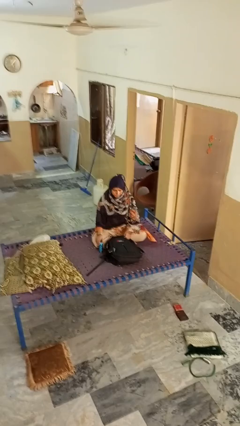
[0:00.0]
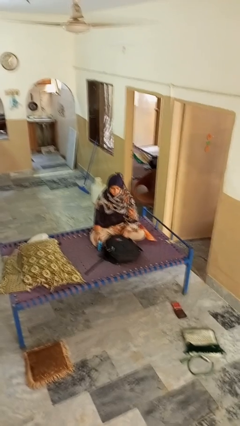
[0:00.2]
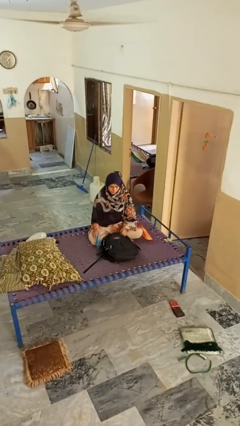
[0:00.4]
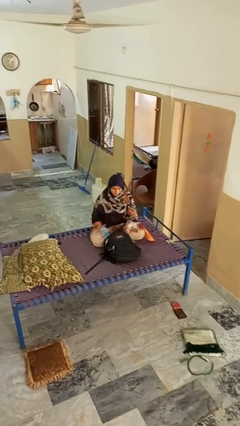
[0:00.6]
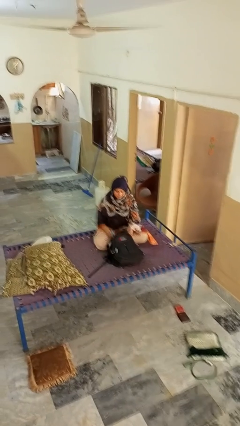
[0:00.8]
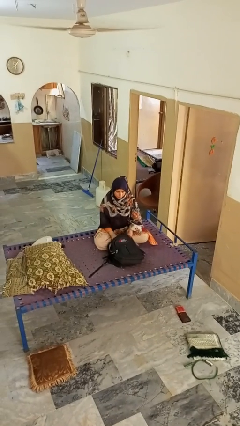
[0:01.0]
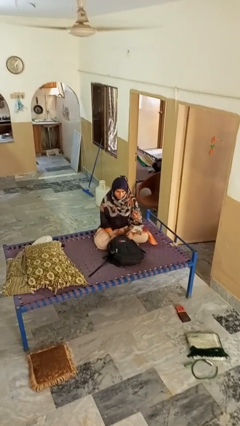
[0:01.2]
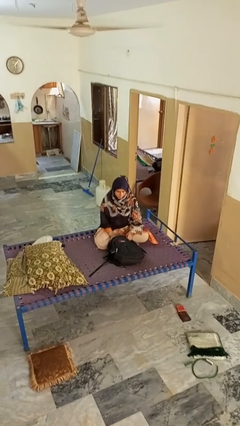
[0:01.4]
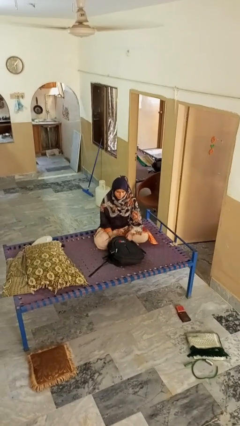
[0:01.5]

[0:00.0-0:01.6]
person puts object into bag

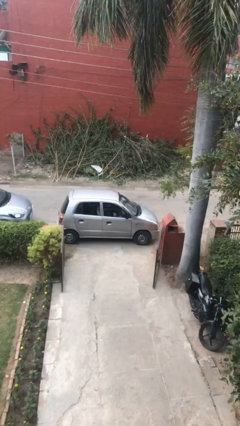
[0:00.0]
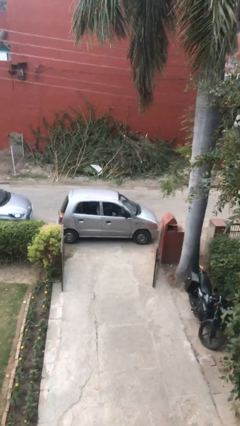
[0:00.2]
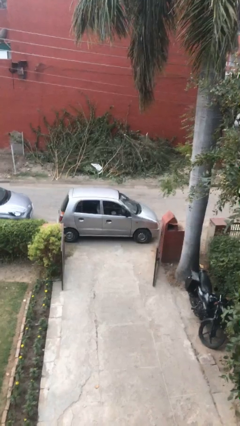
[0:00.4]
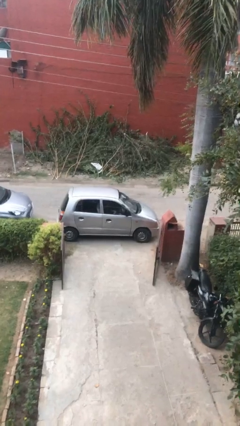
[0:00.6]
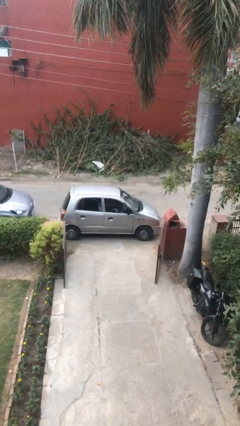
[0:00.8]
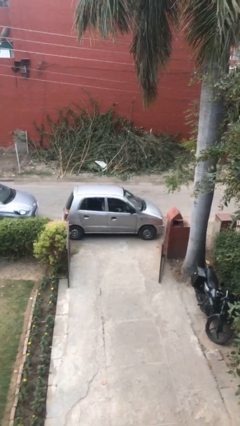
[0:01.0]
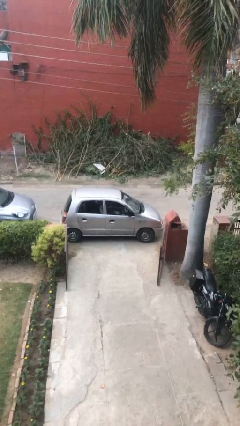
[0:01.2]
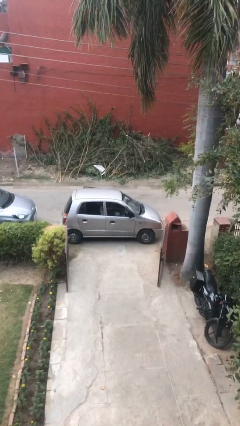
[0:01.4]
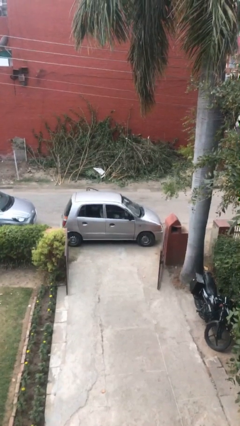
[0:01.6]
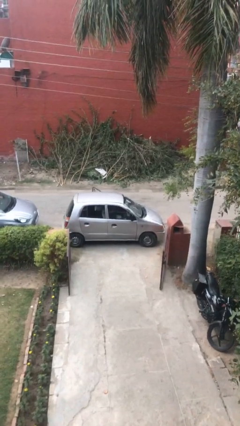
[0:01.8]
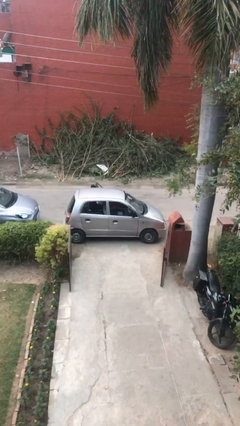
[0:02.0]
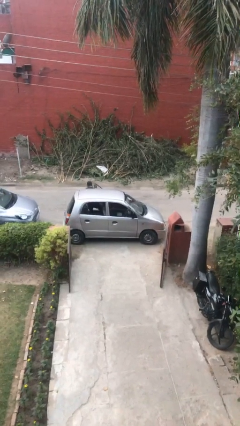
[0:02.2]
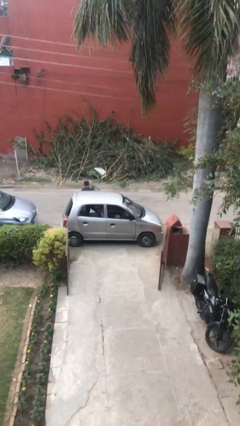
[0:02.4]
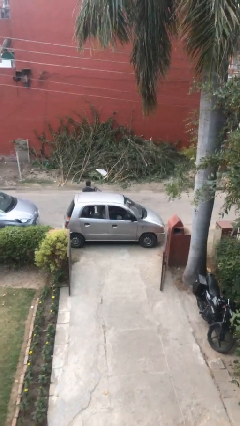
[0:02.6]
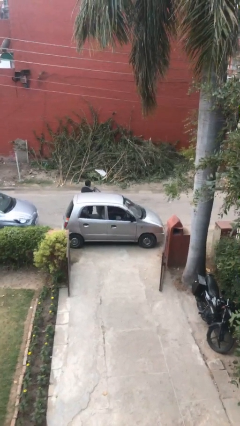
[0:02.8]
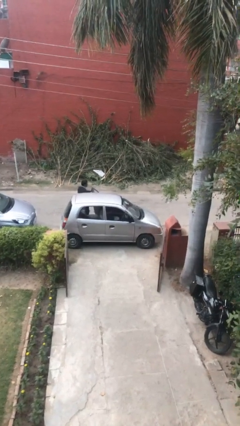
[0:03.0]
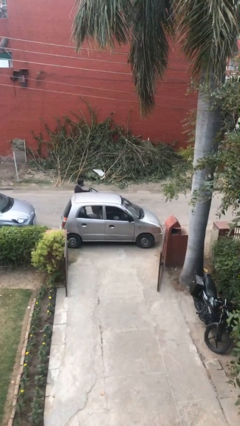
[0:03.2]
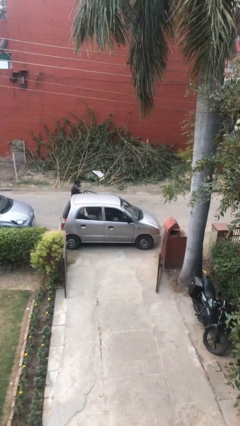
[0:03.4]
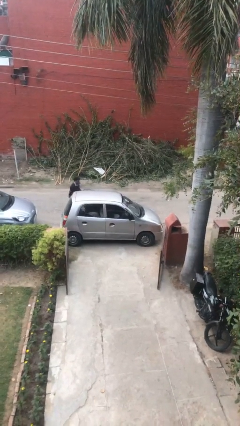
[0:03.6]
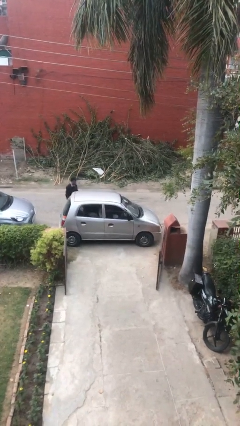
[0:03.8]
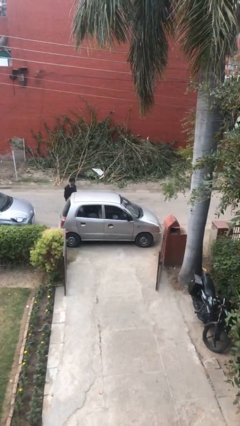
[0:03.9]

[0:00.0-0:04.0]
car drops off person

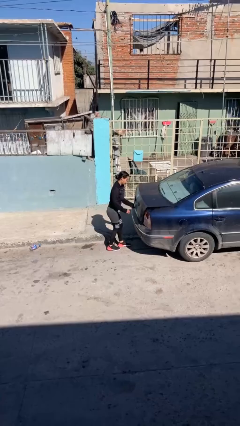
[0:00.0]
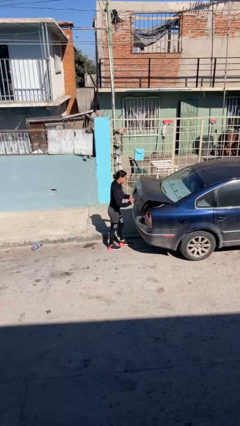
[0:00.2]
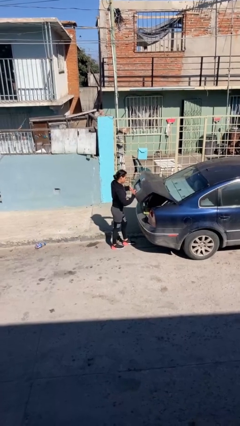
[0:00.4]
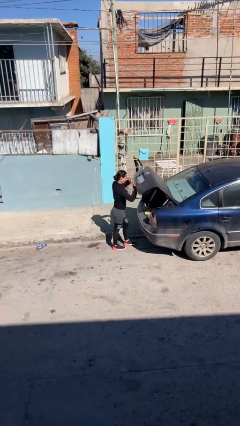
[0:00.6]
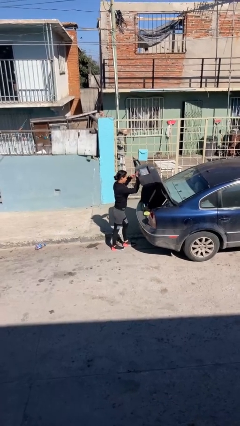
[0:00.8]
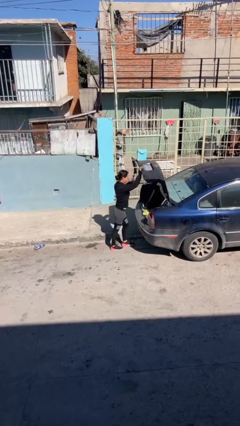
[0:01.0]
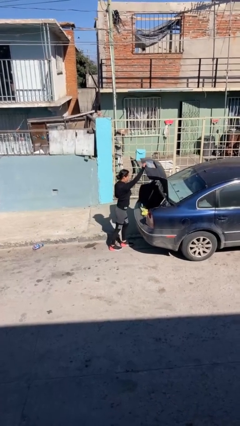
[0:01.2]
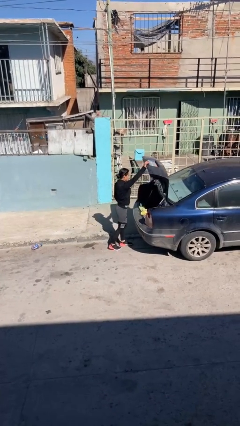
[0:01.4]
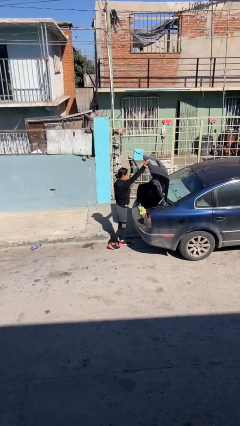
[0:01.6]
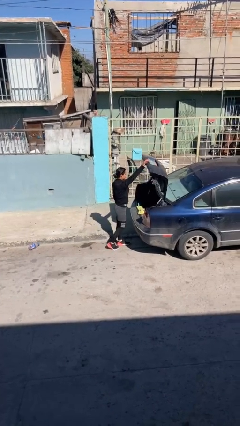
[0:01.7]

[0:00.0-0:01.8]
person opens car trunk

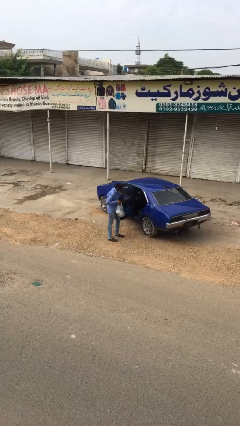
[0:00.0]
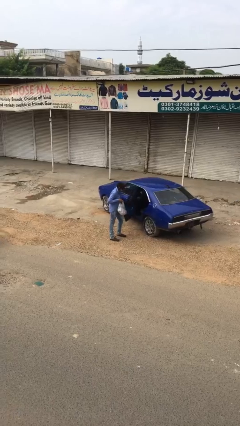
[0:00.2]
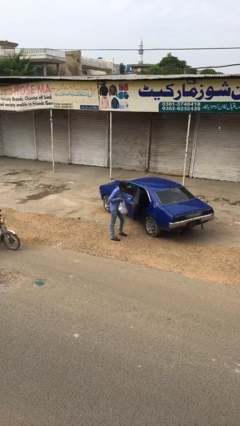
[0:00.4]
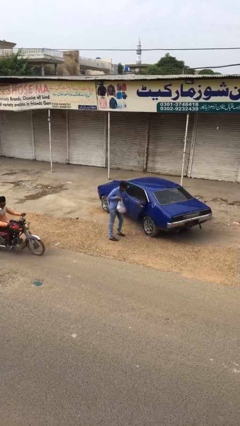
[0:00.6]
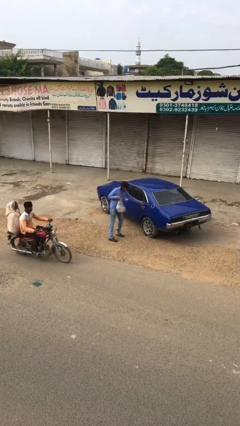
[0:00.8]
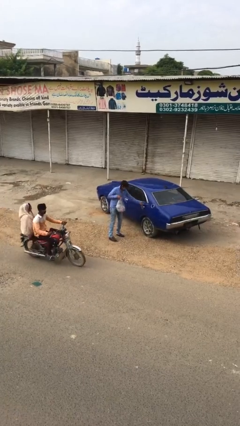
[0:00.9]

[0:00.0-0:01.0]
person closes car door

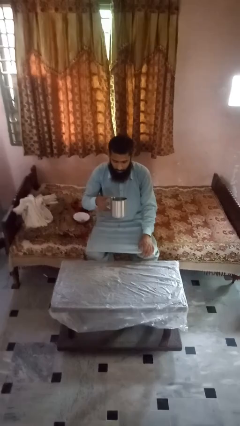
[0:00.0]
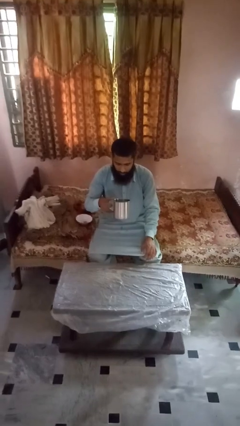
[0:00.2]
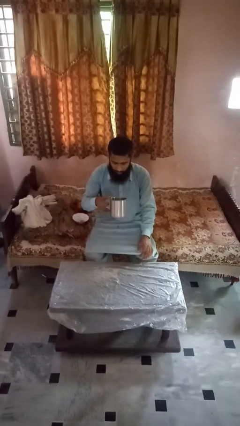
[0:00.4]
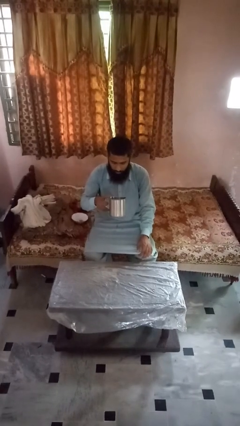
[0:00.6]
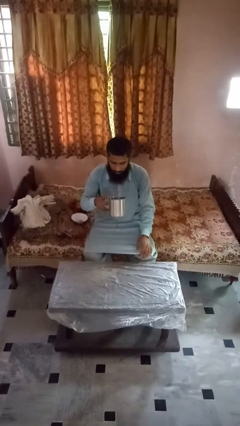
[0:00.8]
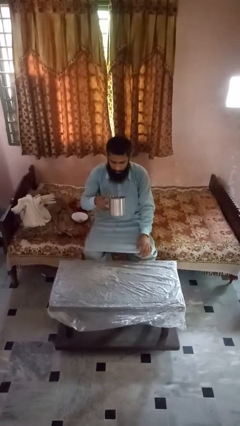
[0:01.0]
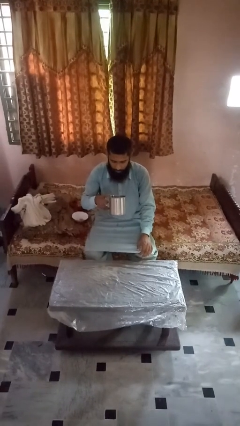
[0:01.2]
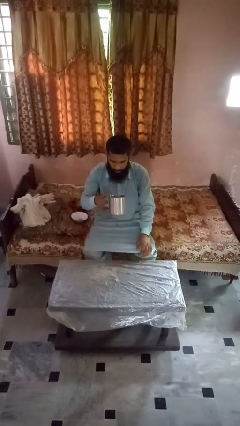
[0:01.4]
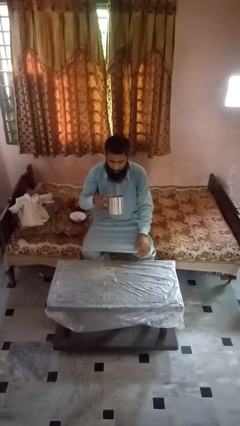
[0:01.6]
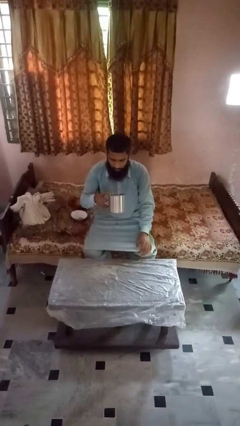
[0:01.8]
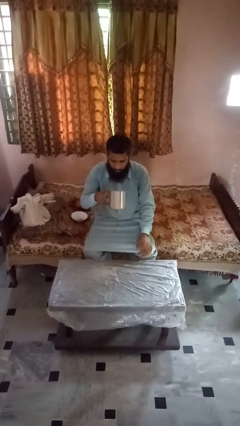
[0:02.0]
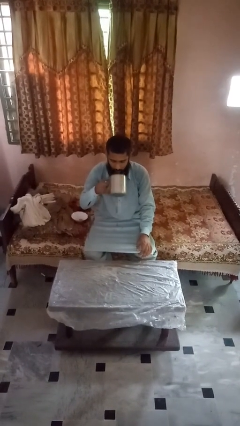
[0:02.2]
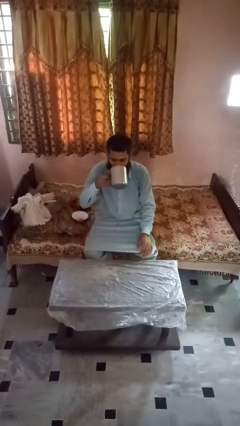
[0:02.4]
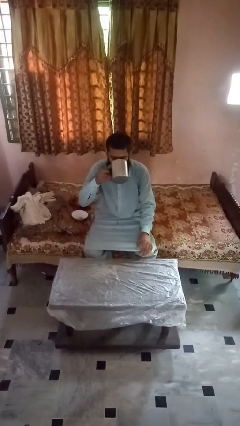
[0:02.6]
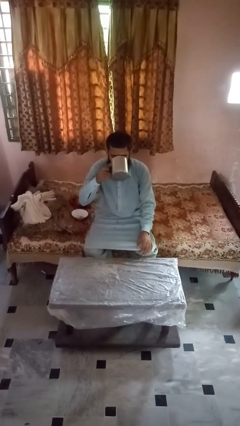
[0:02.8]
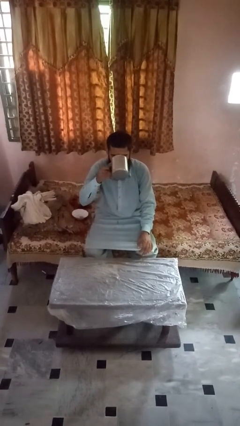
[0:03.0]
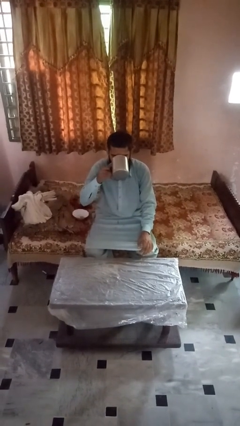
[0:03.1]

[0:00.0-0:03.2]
person drinks from mug

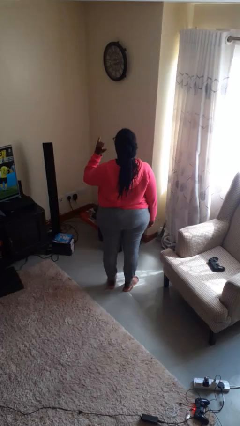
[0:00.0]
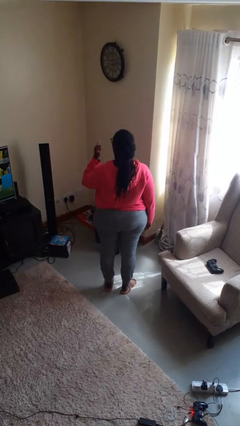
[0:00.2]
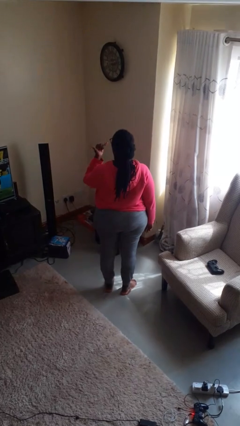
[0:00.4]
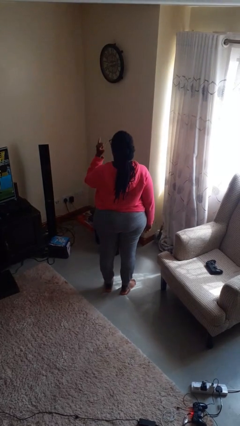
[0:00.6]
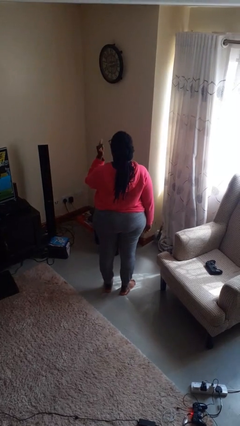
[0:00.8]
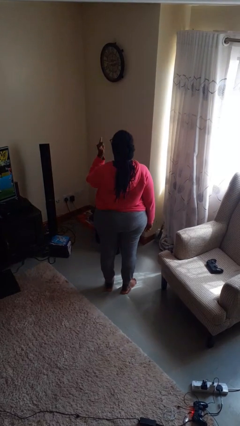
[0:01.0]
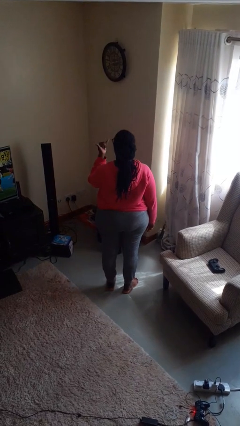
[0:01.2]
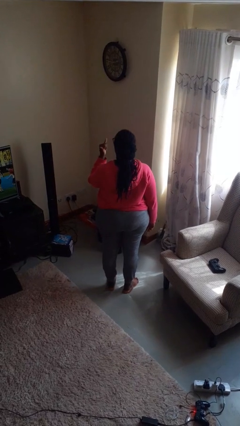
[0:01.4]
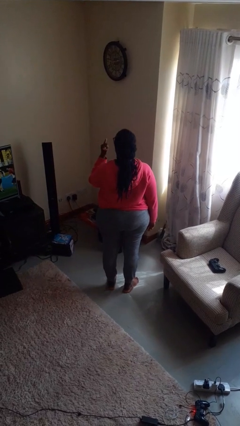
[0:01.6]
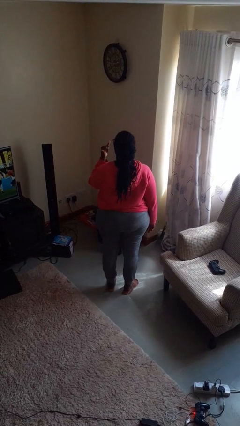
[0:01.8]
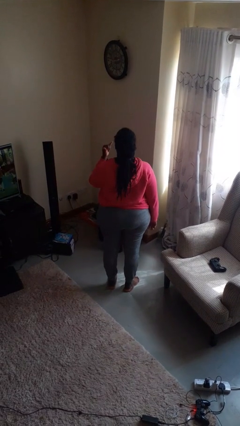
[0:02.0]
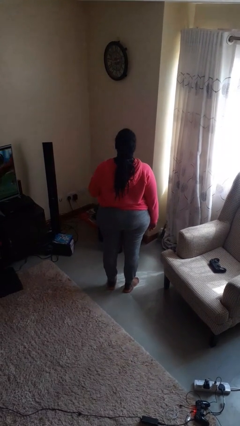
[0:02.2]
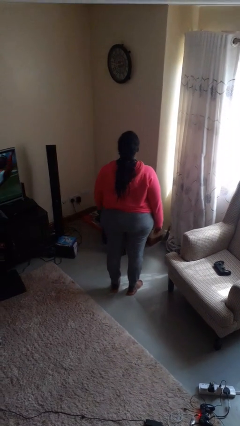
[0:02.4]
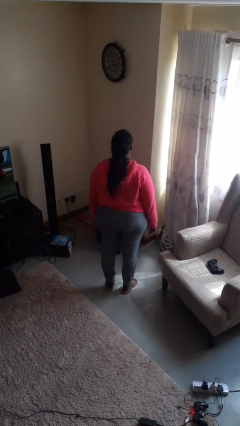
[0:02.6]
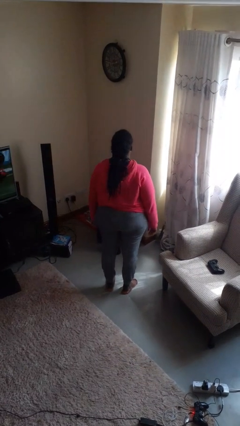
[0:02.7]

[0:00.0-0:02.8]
person gestures hang loose

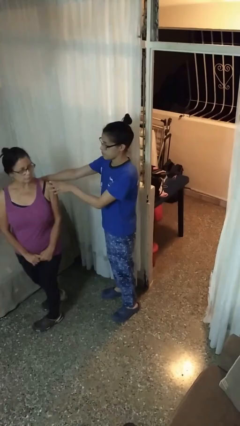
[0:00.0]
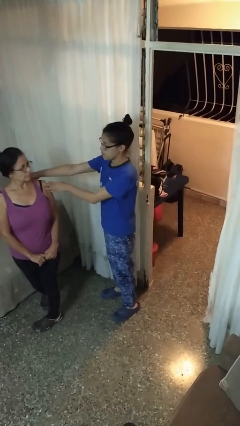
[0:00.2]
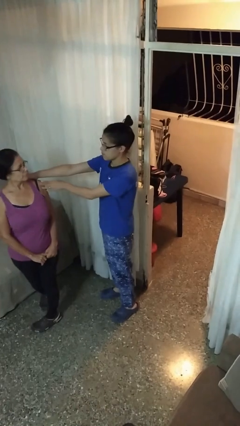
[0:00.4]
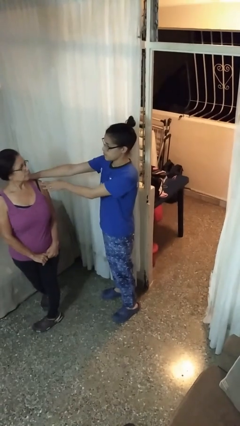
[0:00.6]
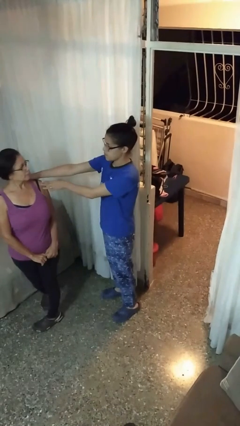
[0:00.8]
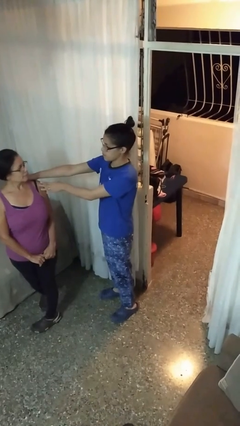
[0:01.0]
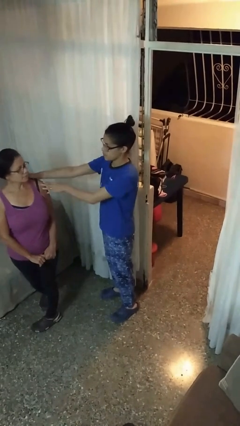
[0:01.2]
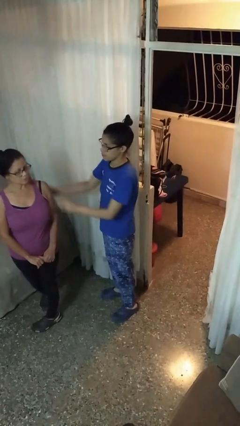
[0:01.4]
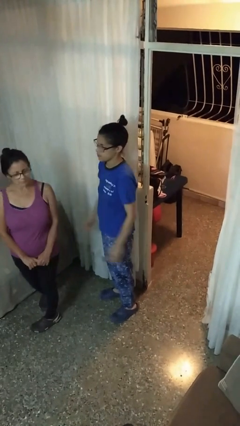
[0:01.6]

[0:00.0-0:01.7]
person spins person around

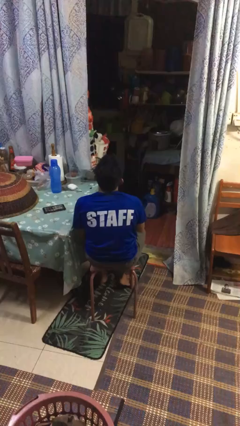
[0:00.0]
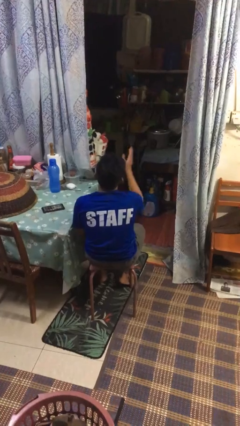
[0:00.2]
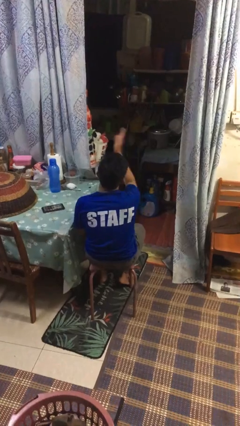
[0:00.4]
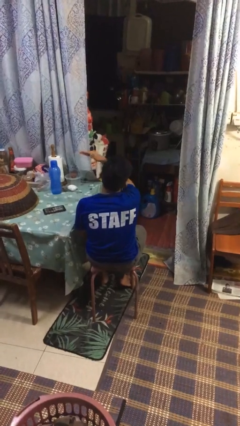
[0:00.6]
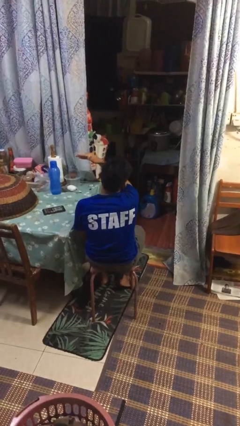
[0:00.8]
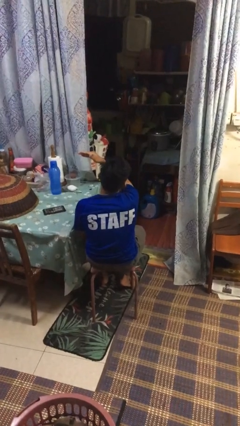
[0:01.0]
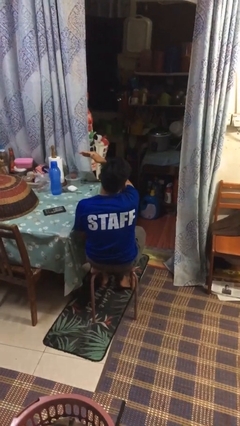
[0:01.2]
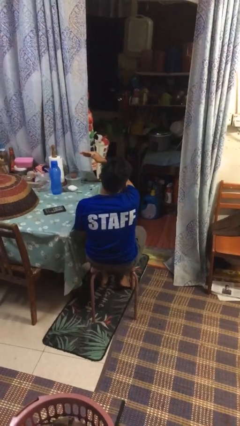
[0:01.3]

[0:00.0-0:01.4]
person gestures swipe left
